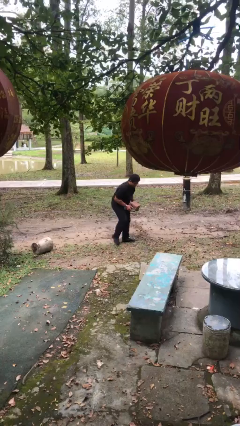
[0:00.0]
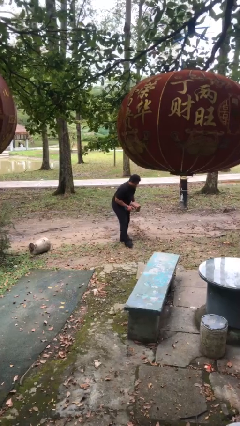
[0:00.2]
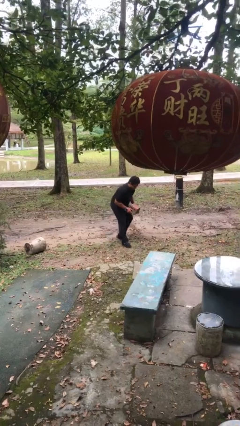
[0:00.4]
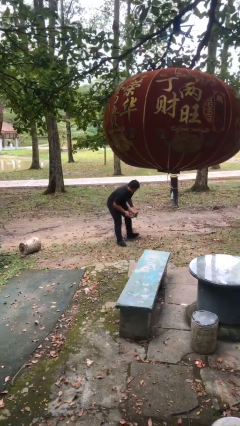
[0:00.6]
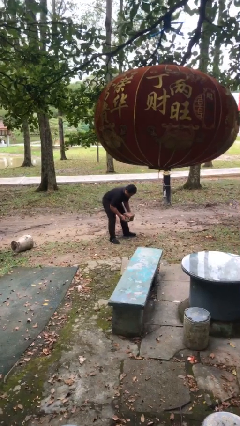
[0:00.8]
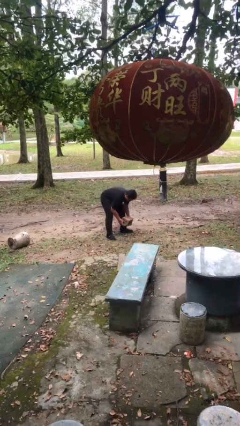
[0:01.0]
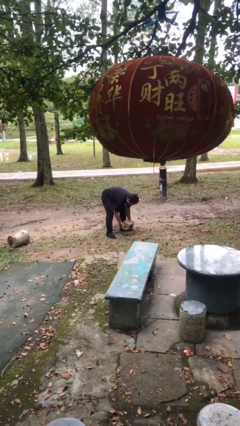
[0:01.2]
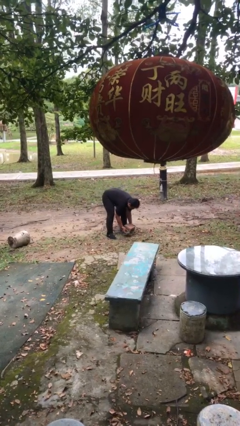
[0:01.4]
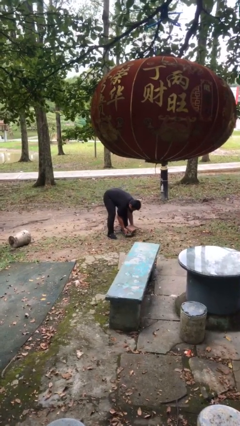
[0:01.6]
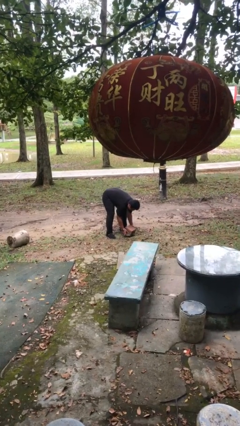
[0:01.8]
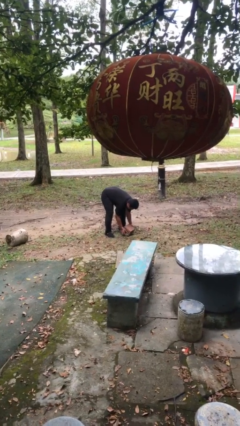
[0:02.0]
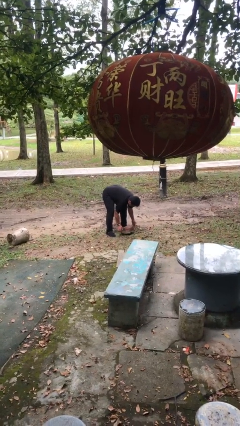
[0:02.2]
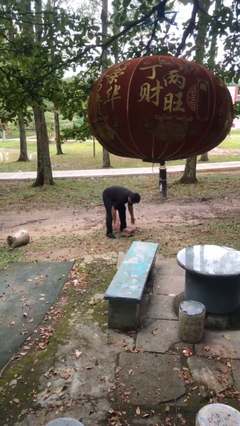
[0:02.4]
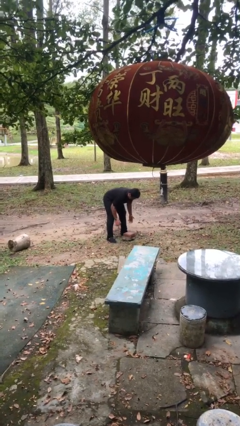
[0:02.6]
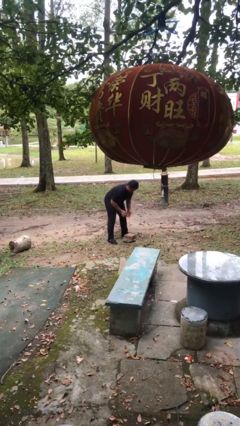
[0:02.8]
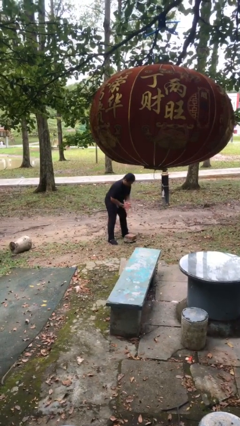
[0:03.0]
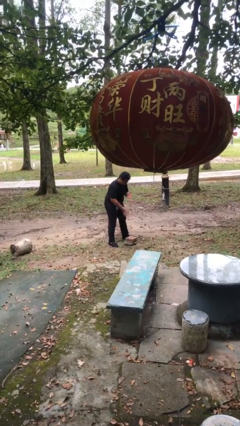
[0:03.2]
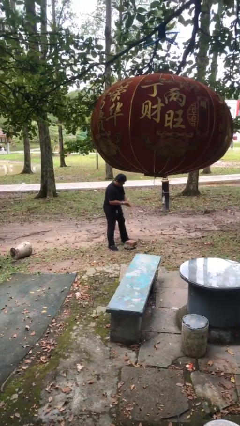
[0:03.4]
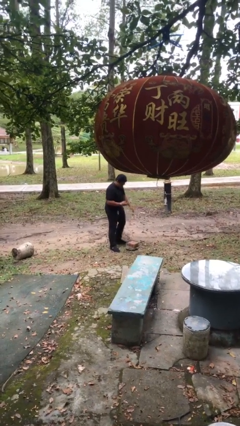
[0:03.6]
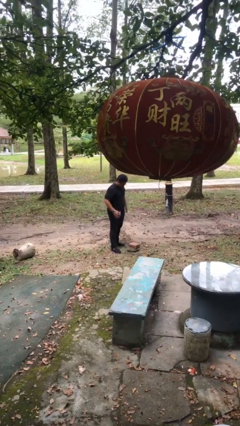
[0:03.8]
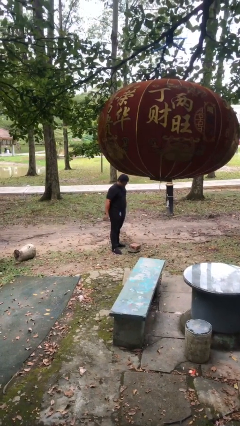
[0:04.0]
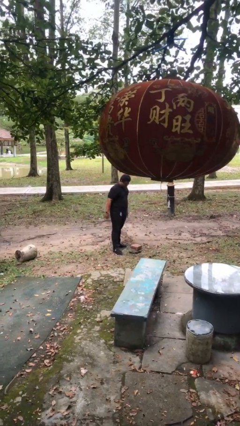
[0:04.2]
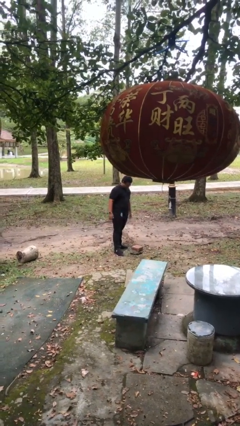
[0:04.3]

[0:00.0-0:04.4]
person puts down object on floor

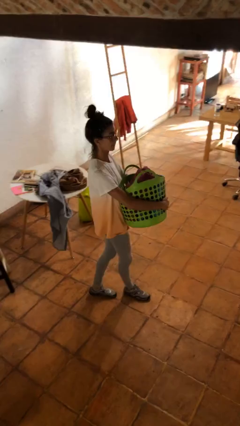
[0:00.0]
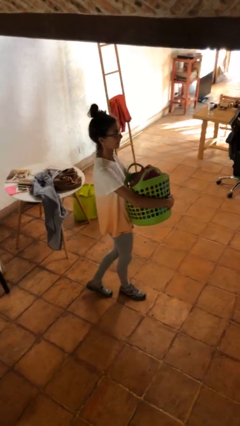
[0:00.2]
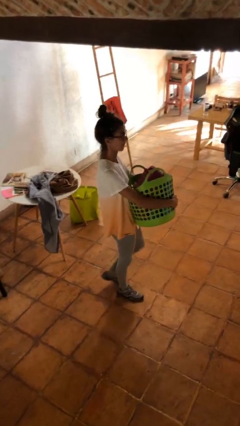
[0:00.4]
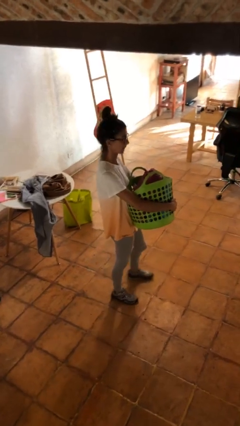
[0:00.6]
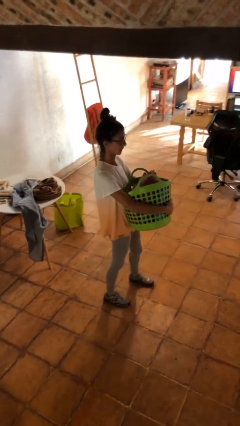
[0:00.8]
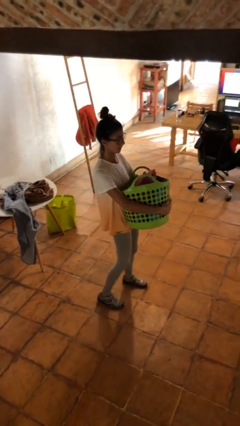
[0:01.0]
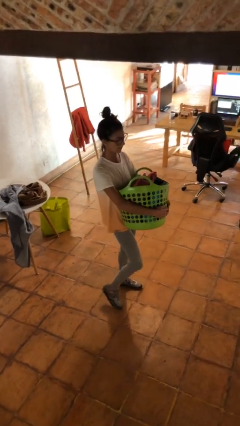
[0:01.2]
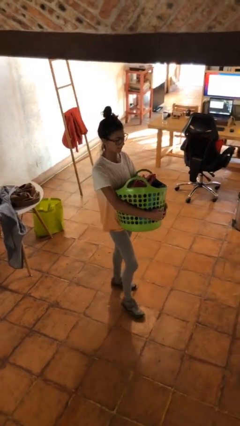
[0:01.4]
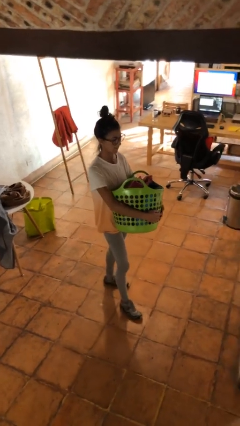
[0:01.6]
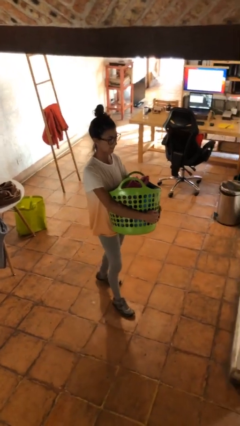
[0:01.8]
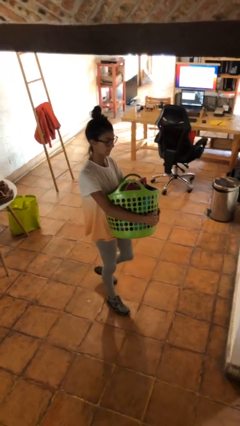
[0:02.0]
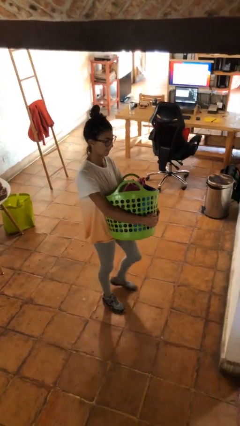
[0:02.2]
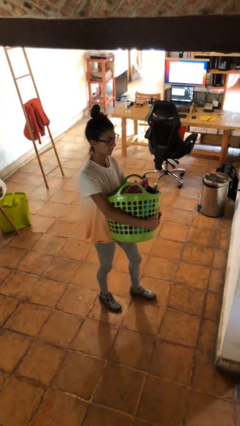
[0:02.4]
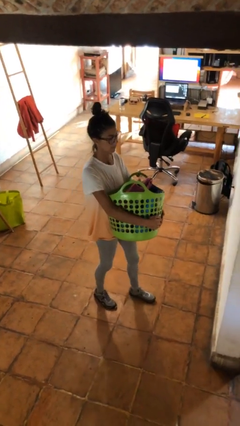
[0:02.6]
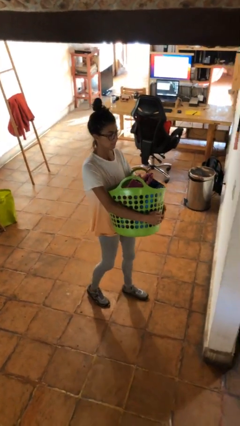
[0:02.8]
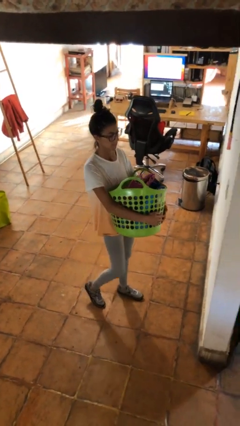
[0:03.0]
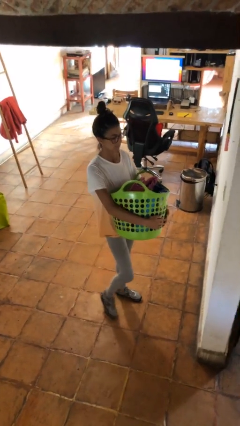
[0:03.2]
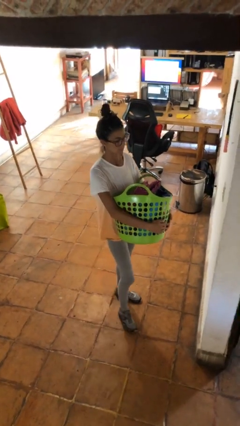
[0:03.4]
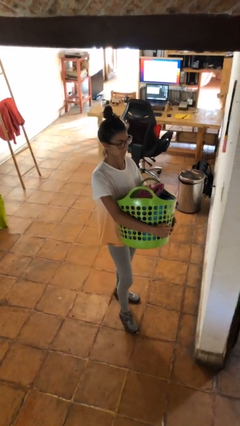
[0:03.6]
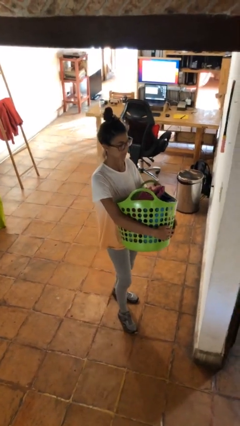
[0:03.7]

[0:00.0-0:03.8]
person carries laundry basket

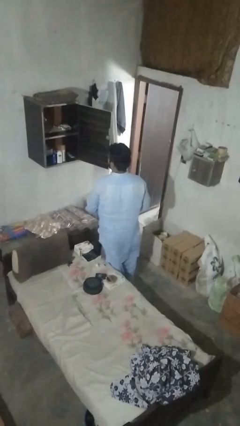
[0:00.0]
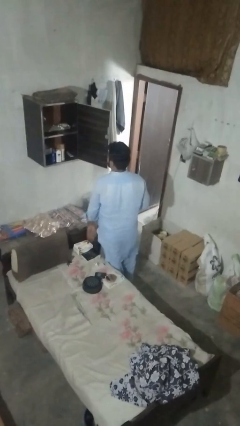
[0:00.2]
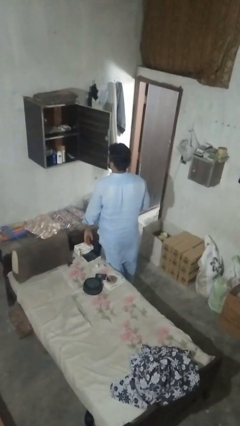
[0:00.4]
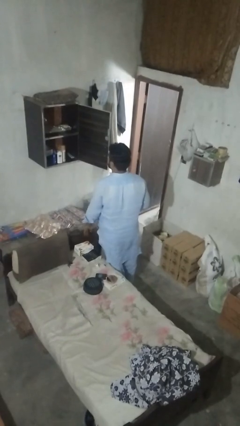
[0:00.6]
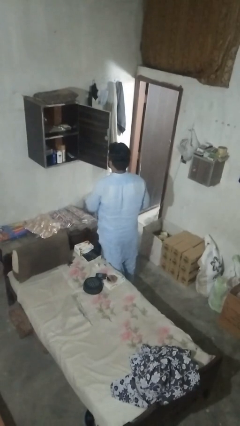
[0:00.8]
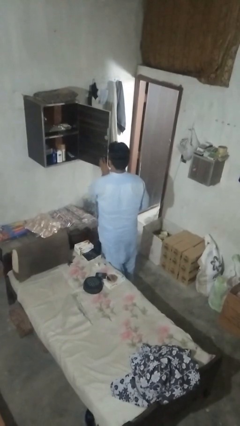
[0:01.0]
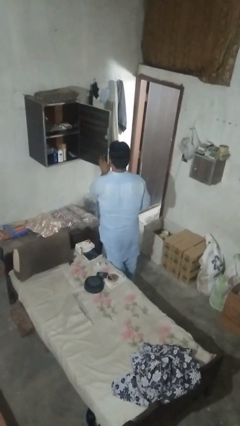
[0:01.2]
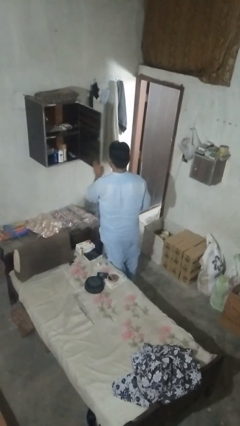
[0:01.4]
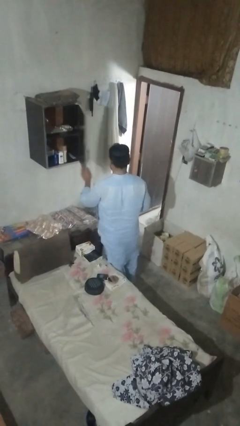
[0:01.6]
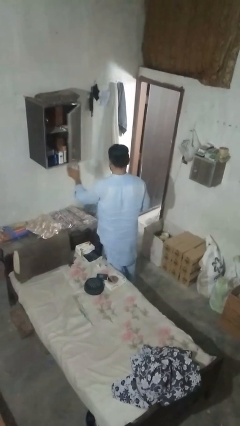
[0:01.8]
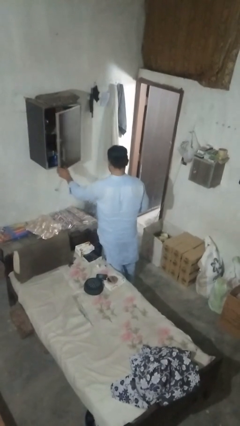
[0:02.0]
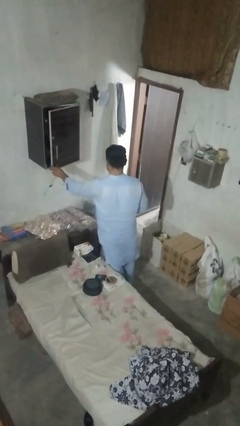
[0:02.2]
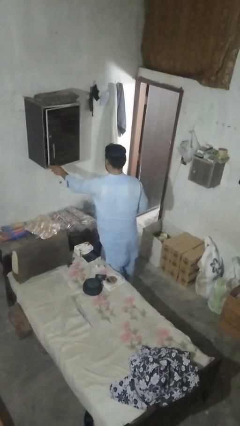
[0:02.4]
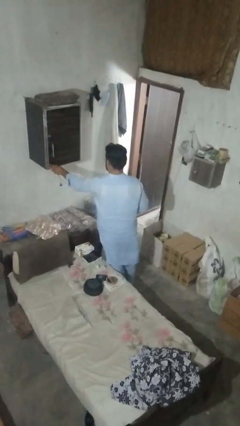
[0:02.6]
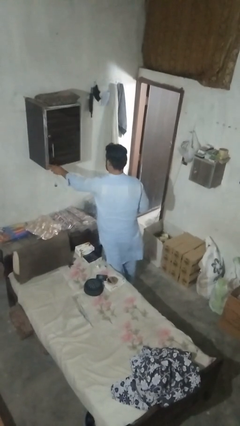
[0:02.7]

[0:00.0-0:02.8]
person closes dresser drawer

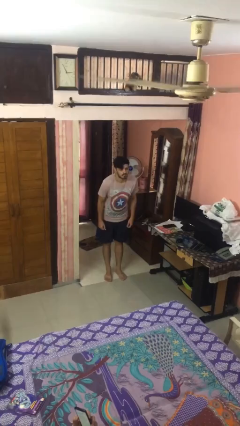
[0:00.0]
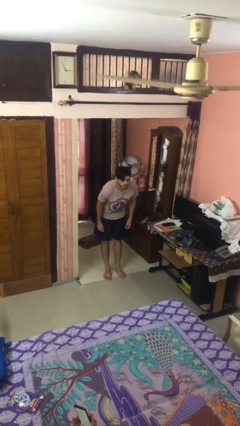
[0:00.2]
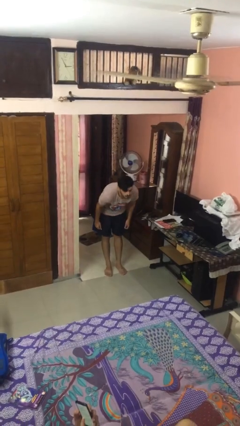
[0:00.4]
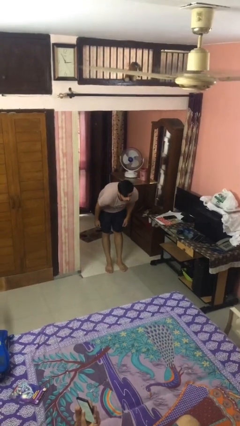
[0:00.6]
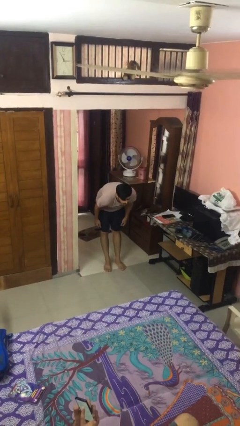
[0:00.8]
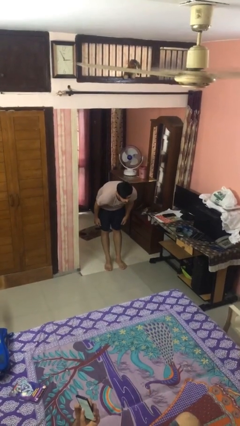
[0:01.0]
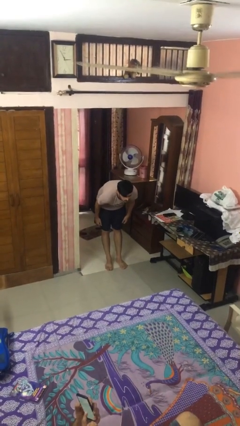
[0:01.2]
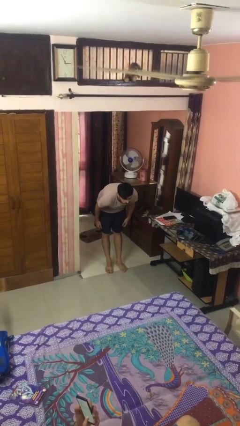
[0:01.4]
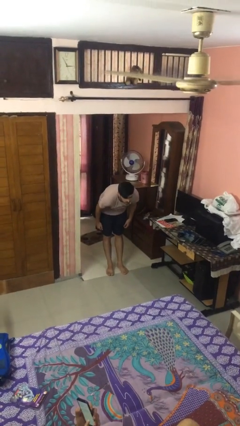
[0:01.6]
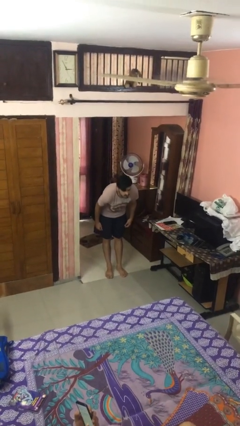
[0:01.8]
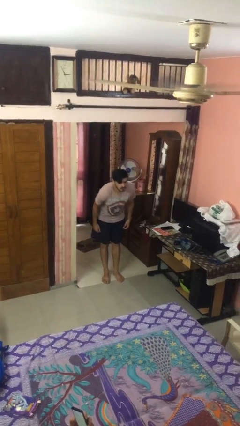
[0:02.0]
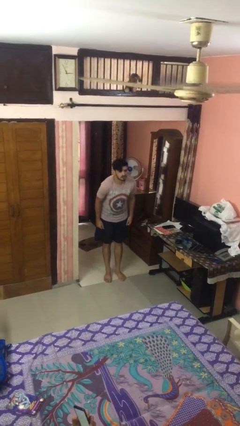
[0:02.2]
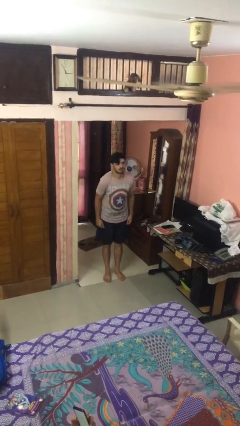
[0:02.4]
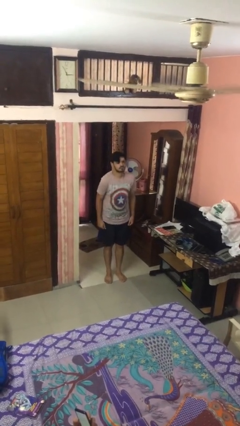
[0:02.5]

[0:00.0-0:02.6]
person bows

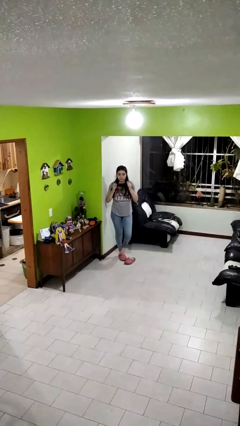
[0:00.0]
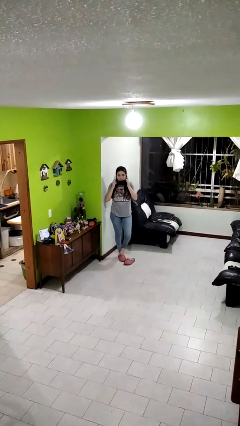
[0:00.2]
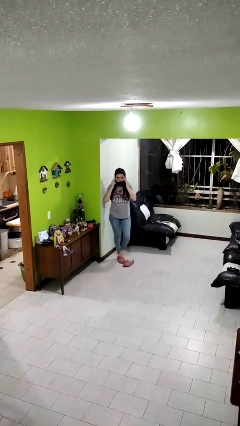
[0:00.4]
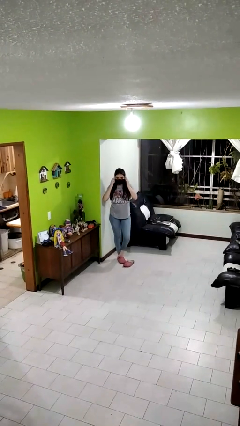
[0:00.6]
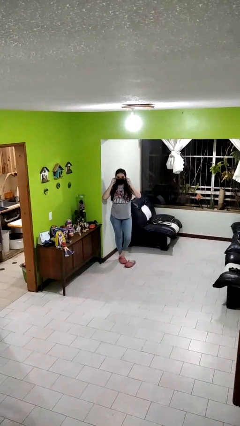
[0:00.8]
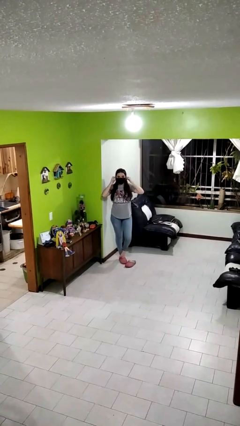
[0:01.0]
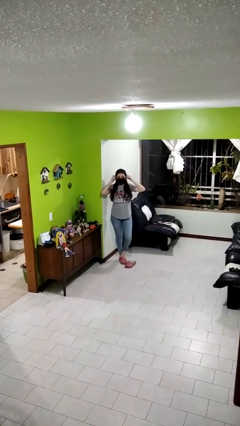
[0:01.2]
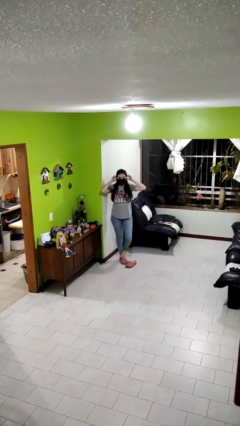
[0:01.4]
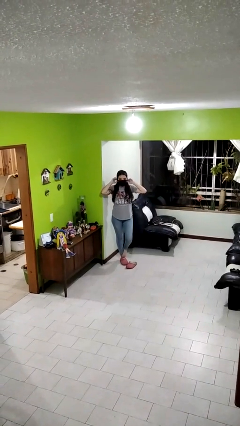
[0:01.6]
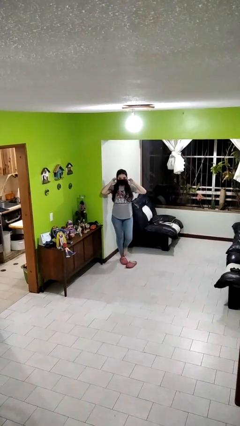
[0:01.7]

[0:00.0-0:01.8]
person puts on facemask

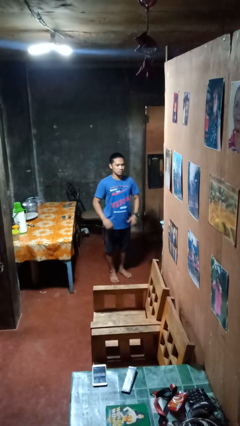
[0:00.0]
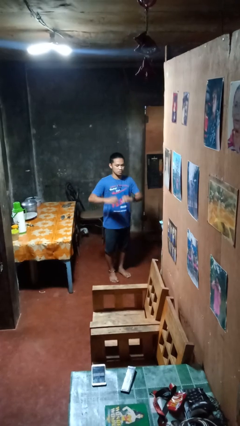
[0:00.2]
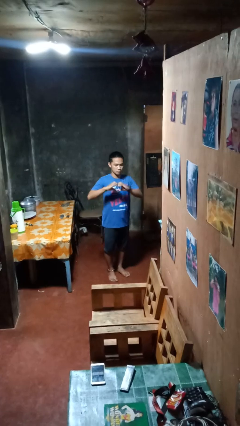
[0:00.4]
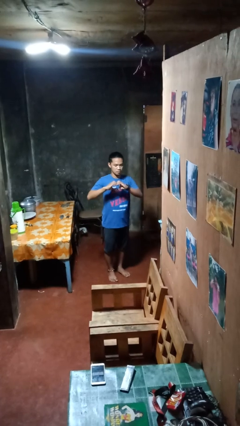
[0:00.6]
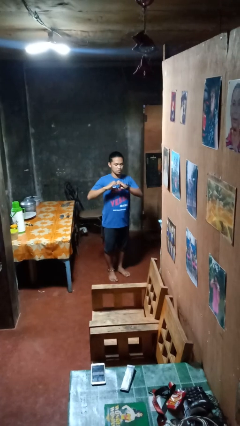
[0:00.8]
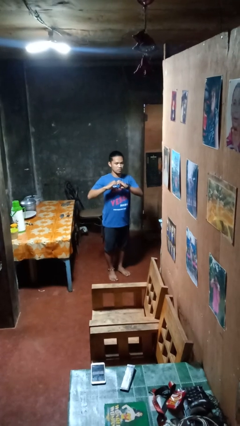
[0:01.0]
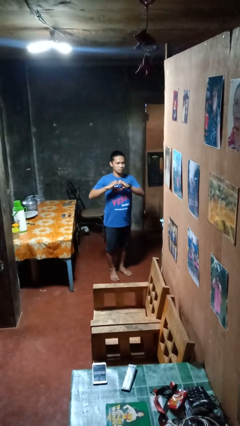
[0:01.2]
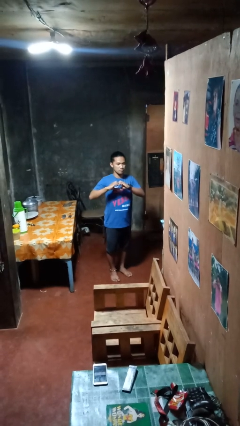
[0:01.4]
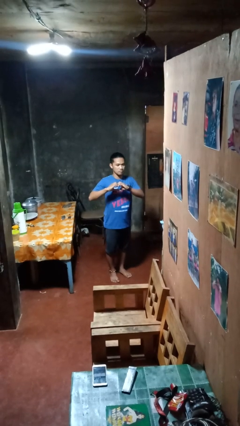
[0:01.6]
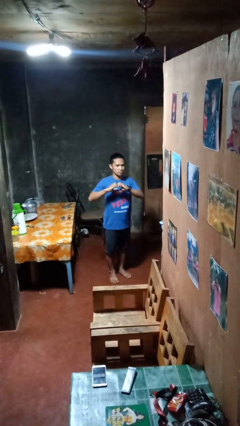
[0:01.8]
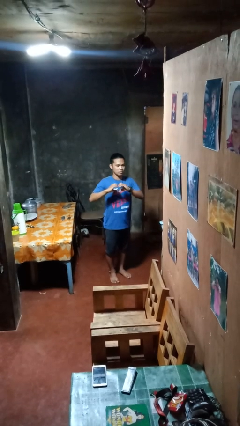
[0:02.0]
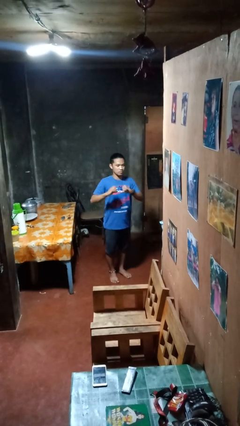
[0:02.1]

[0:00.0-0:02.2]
person gestures heart
